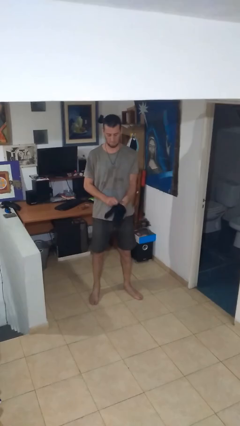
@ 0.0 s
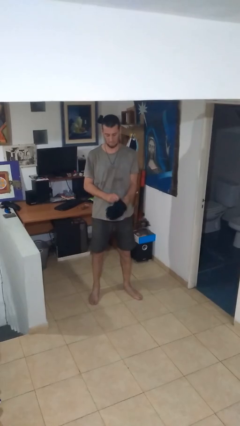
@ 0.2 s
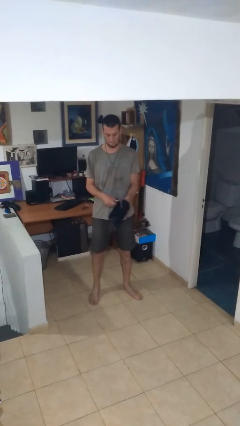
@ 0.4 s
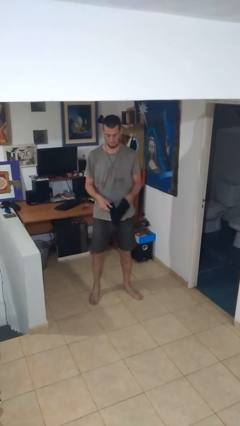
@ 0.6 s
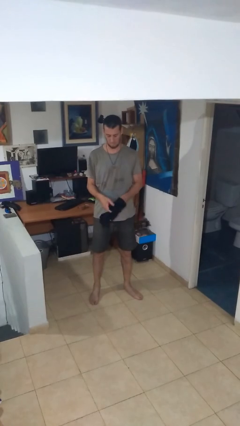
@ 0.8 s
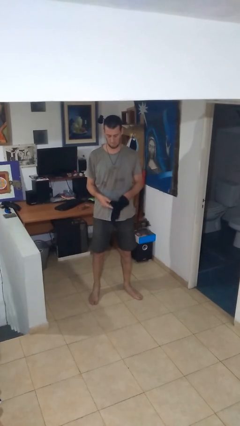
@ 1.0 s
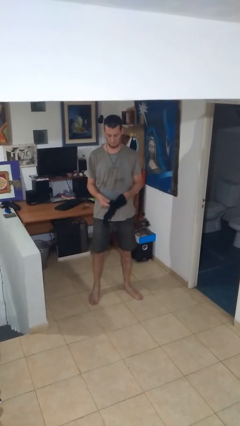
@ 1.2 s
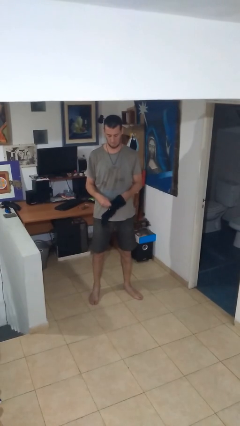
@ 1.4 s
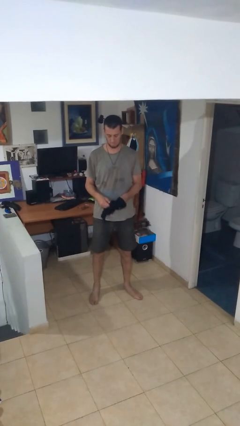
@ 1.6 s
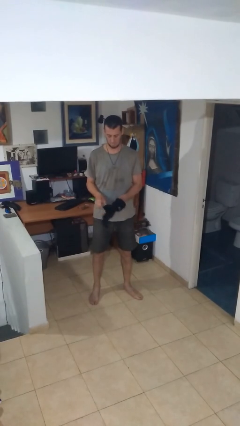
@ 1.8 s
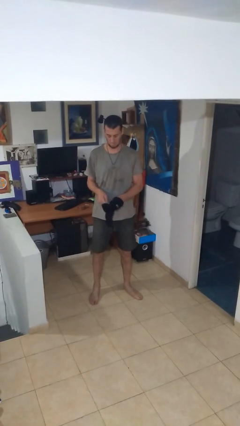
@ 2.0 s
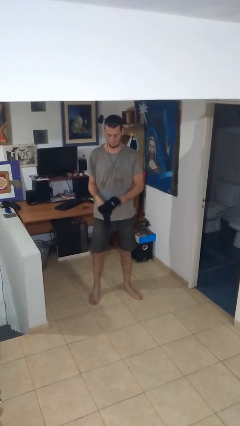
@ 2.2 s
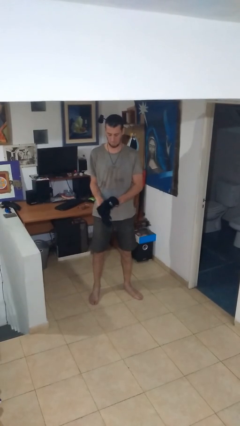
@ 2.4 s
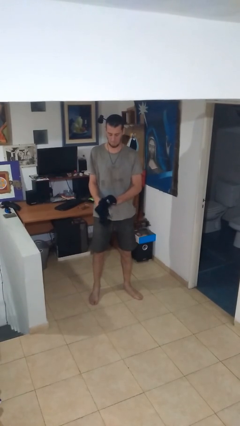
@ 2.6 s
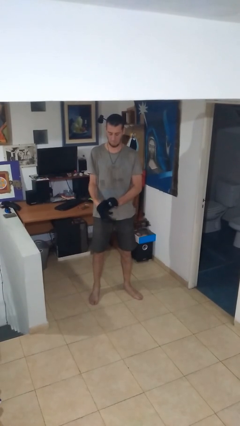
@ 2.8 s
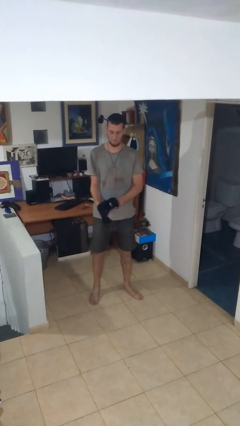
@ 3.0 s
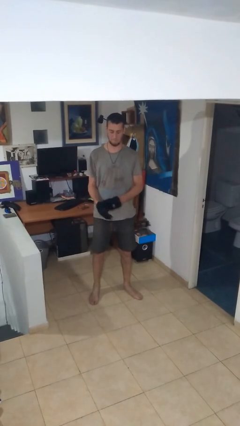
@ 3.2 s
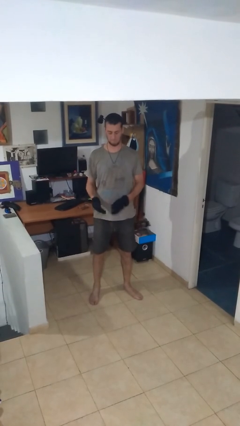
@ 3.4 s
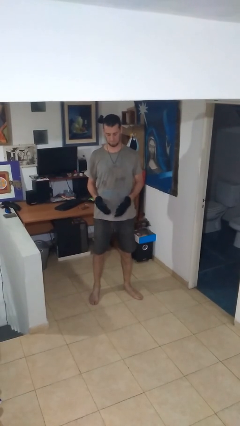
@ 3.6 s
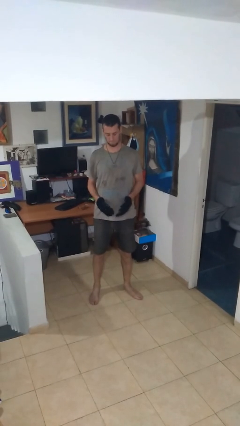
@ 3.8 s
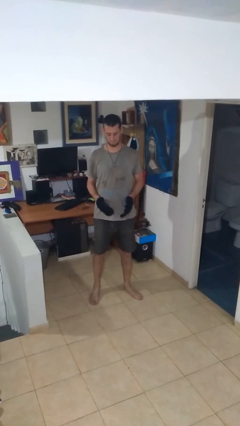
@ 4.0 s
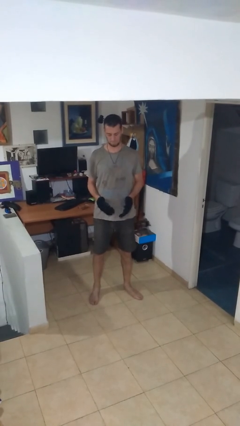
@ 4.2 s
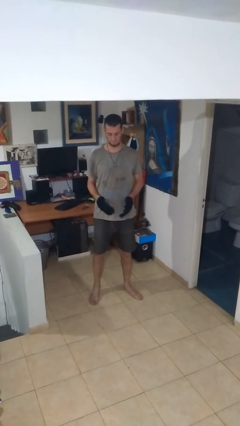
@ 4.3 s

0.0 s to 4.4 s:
person puts on gloves

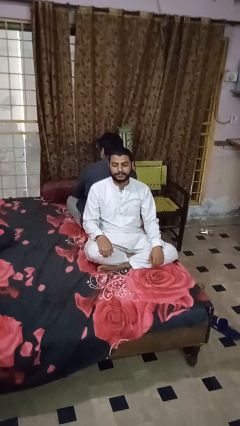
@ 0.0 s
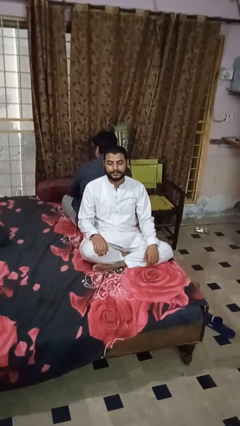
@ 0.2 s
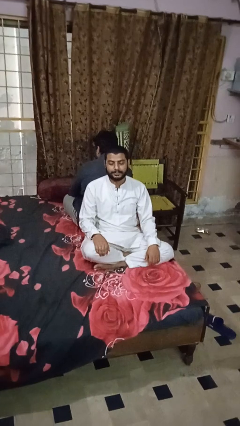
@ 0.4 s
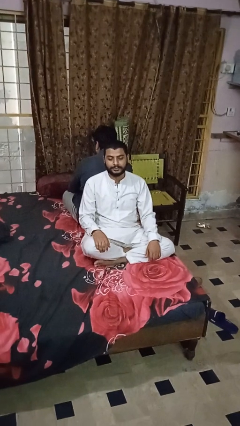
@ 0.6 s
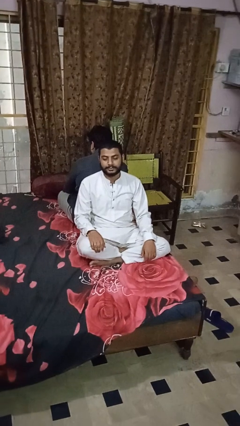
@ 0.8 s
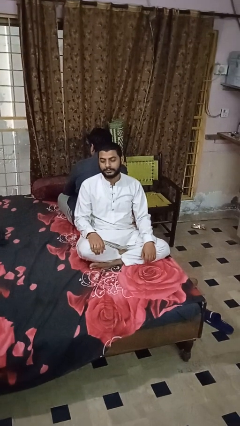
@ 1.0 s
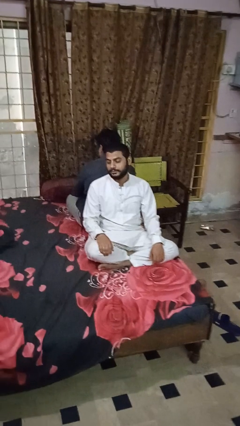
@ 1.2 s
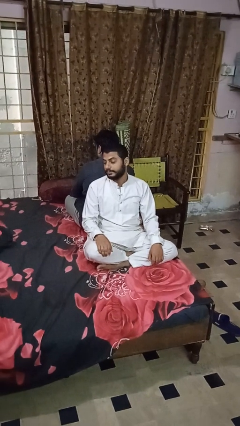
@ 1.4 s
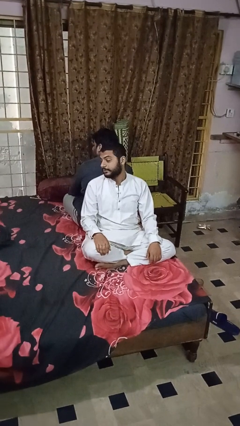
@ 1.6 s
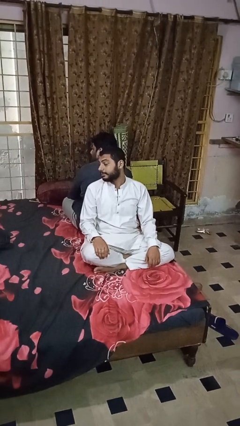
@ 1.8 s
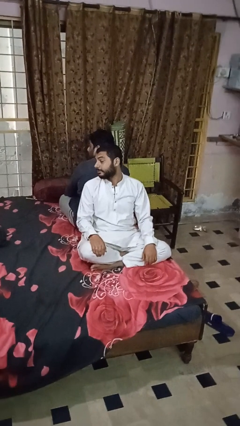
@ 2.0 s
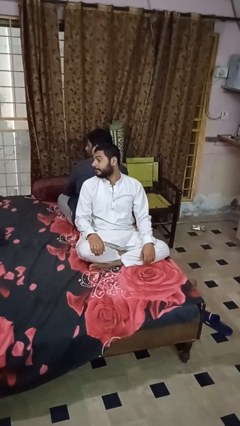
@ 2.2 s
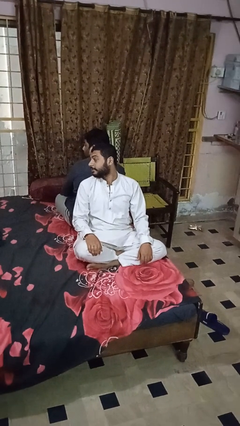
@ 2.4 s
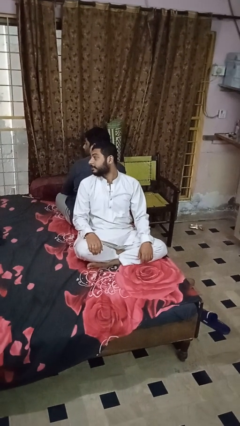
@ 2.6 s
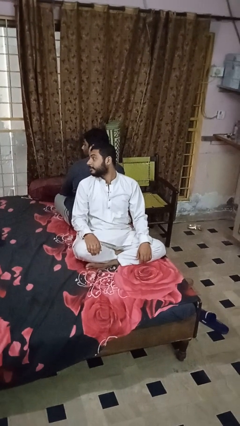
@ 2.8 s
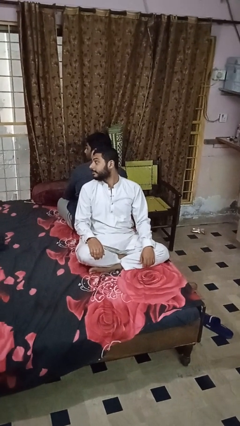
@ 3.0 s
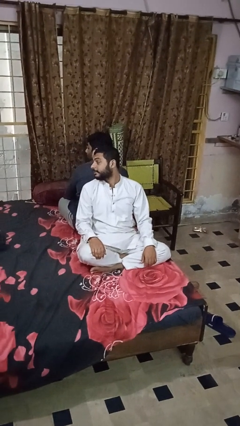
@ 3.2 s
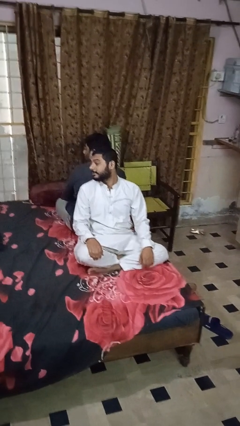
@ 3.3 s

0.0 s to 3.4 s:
person looks over shoulder

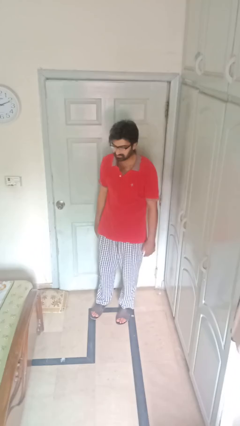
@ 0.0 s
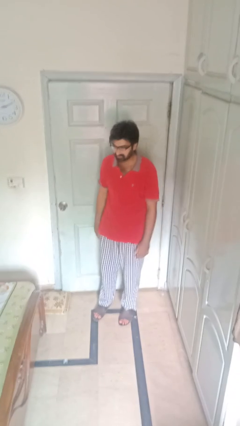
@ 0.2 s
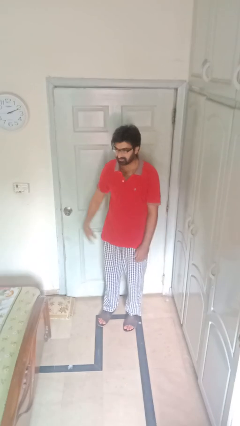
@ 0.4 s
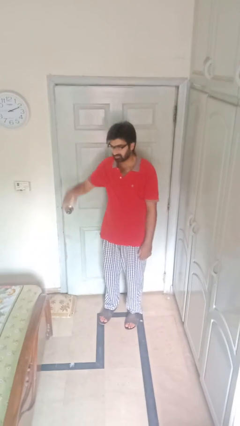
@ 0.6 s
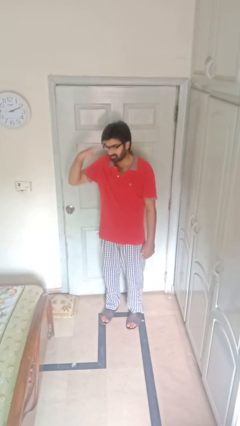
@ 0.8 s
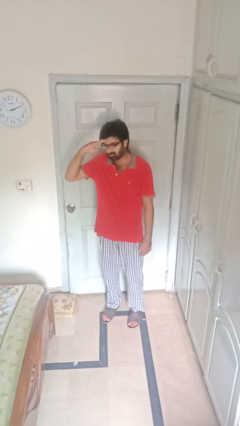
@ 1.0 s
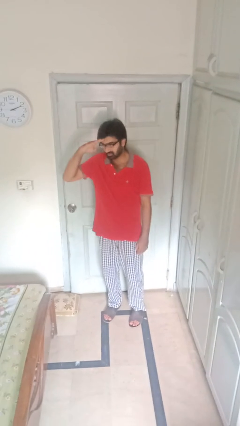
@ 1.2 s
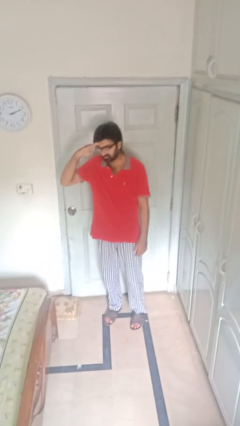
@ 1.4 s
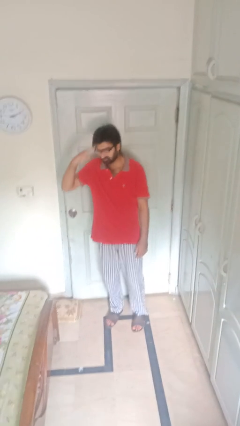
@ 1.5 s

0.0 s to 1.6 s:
person salutes

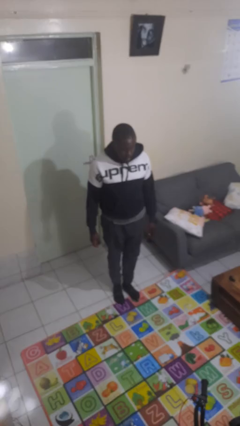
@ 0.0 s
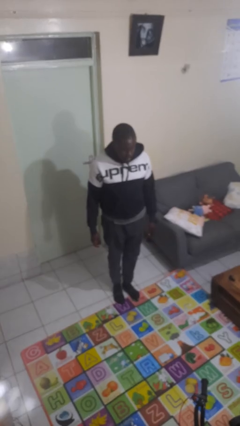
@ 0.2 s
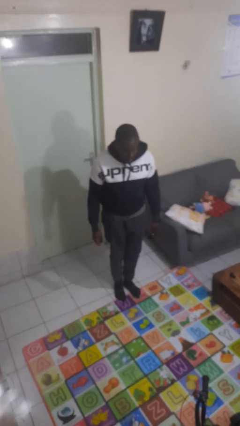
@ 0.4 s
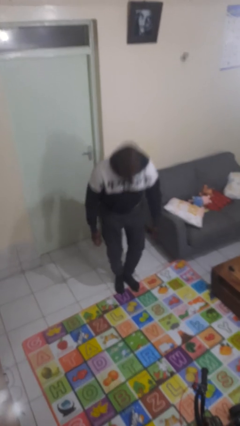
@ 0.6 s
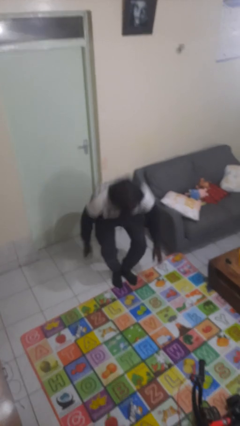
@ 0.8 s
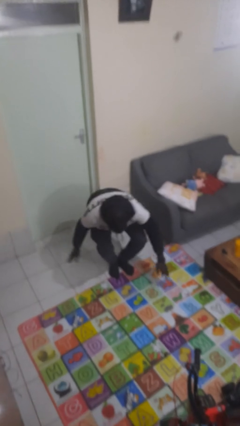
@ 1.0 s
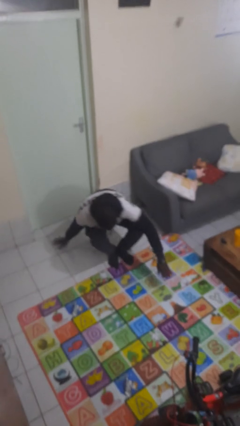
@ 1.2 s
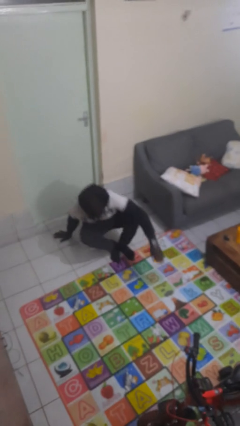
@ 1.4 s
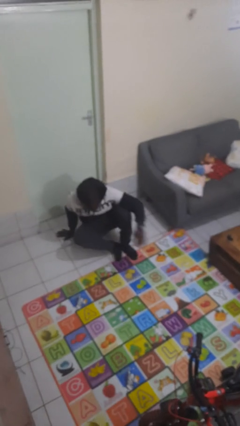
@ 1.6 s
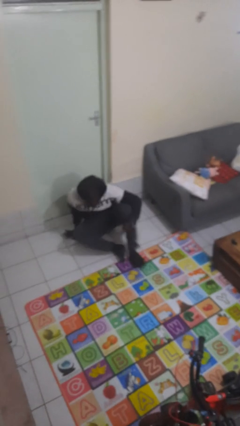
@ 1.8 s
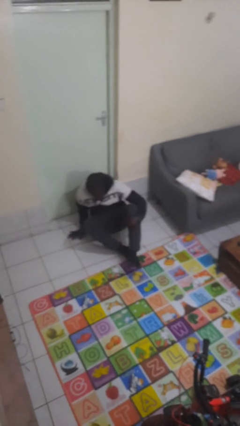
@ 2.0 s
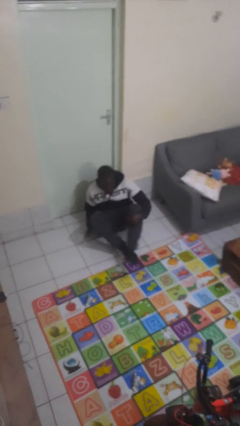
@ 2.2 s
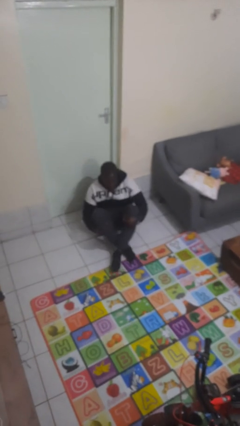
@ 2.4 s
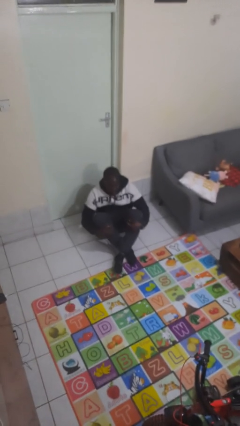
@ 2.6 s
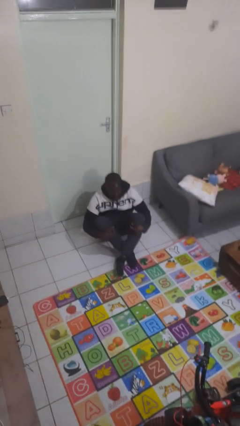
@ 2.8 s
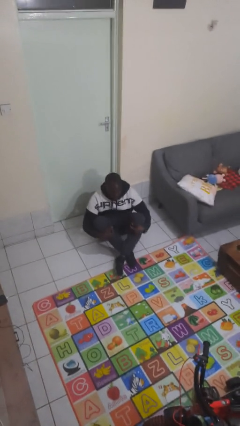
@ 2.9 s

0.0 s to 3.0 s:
person sits crisscross

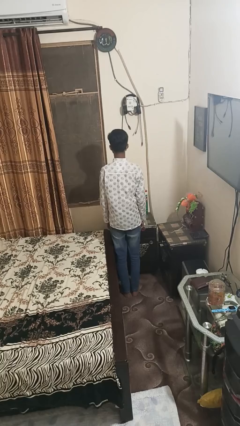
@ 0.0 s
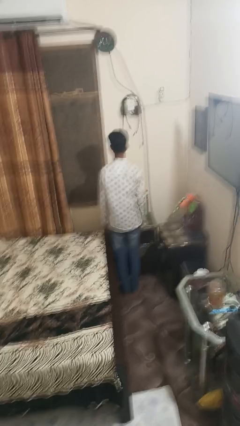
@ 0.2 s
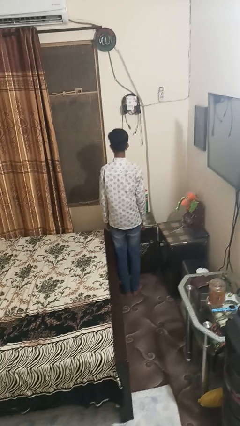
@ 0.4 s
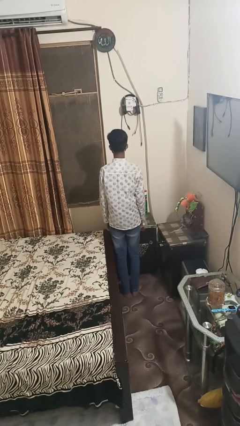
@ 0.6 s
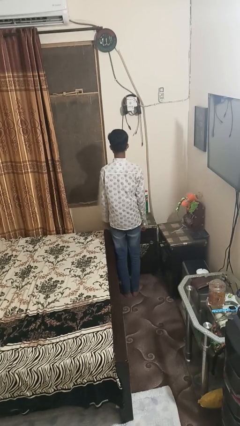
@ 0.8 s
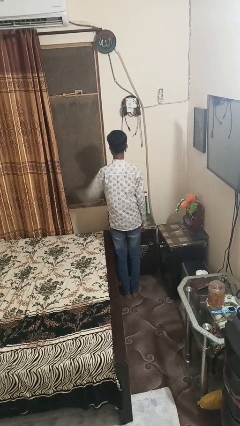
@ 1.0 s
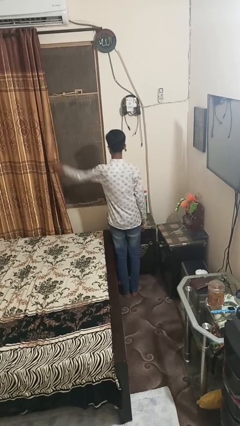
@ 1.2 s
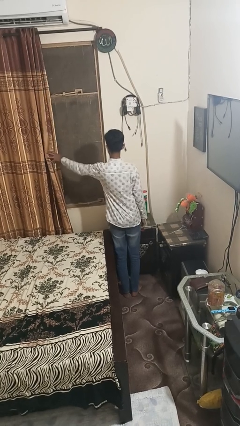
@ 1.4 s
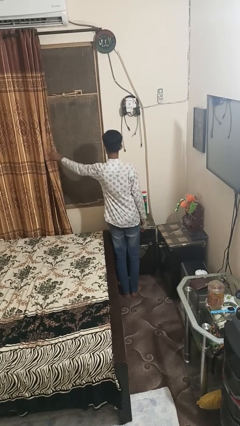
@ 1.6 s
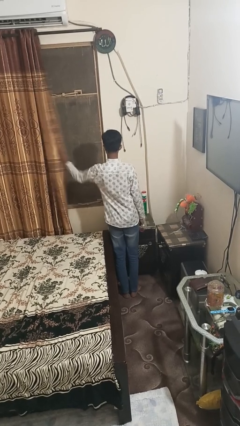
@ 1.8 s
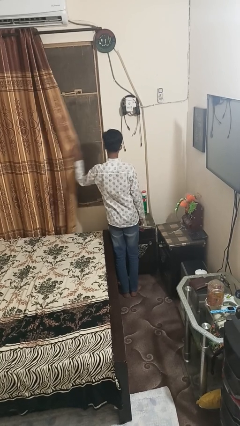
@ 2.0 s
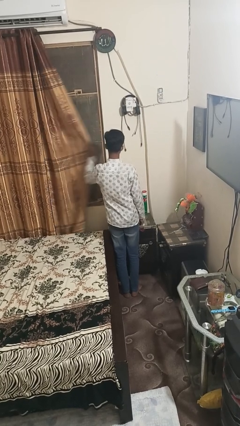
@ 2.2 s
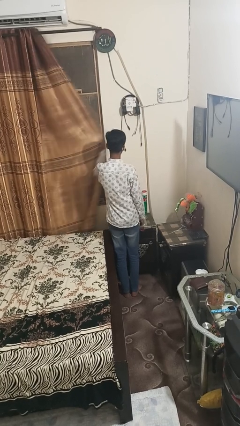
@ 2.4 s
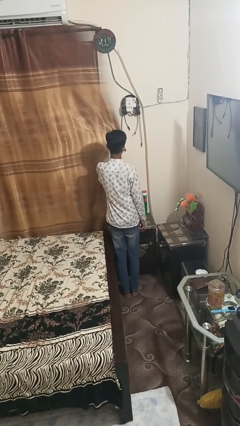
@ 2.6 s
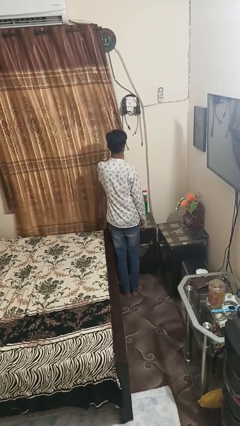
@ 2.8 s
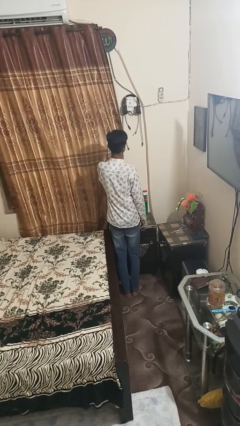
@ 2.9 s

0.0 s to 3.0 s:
person closes curtains

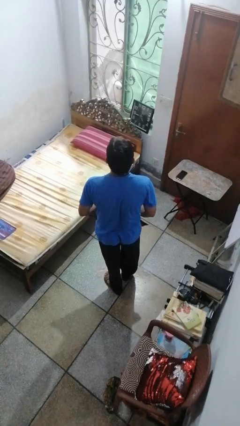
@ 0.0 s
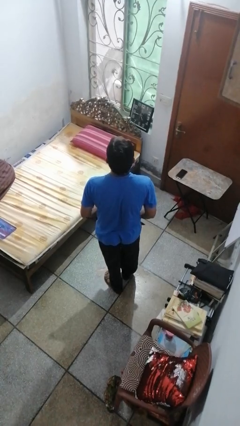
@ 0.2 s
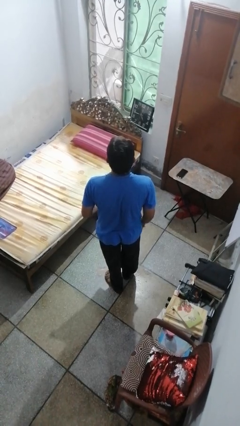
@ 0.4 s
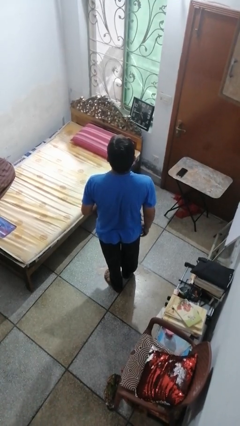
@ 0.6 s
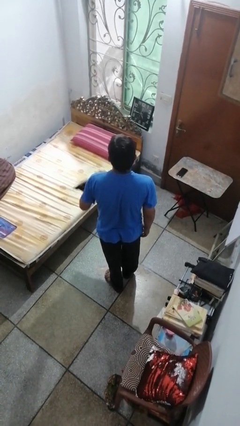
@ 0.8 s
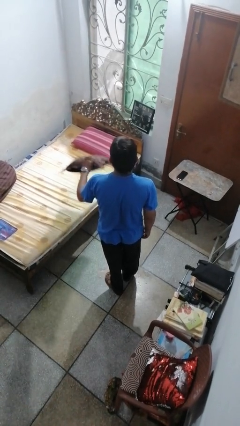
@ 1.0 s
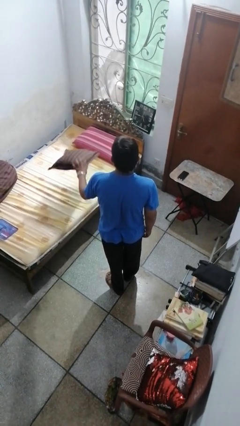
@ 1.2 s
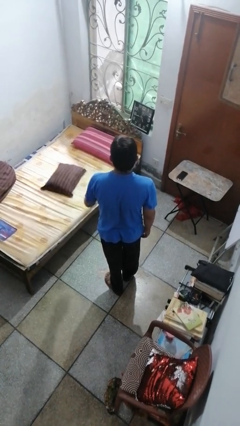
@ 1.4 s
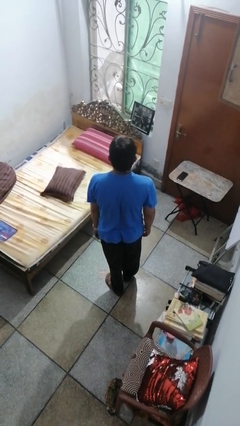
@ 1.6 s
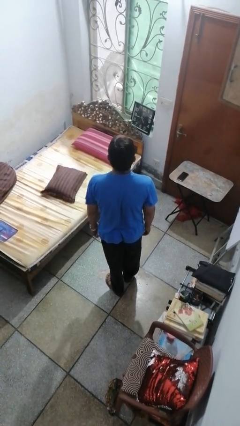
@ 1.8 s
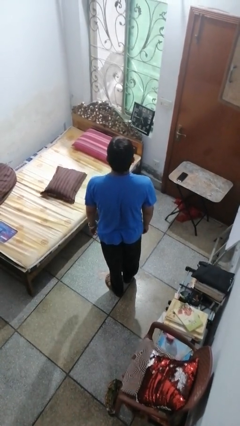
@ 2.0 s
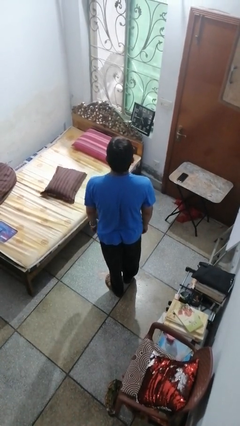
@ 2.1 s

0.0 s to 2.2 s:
person throws object on bed
